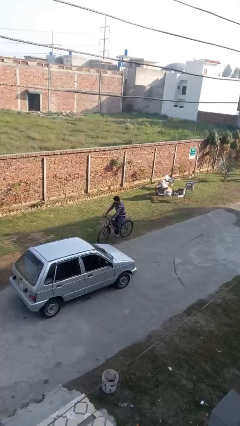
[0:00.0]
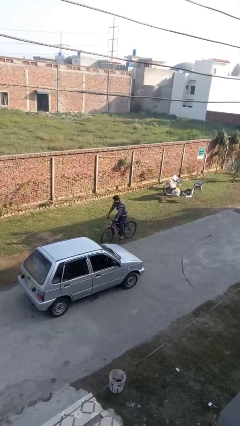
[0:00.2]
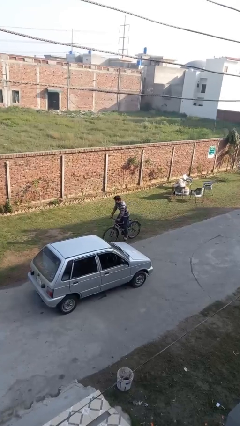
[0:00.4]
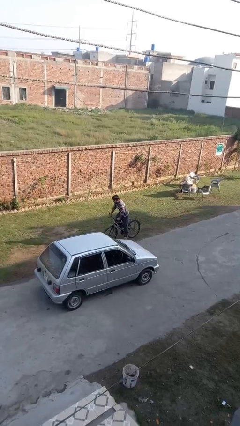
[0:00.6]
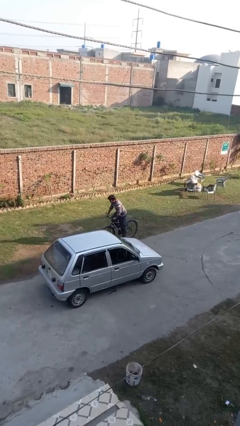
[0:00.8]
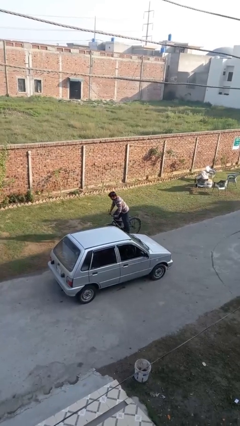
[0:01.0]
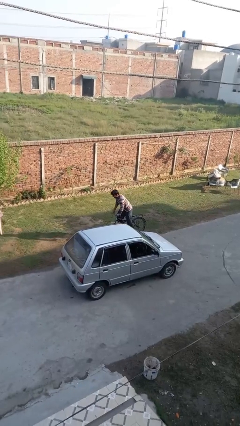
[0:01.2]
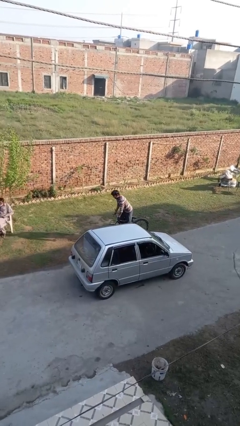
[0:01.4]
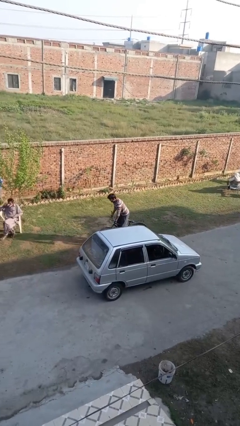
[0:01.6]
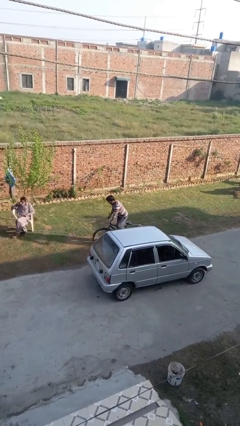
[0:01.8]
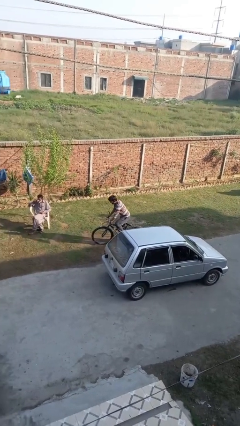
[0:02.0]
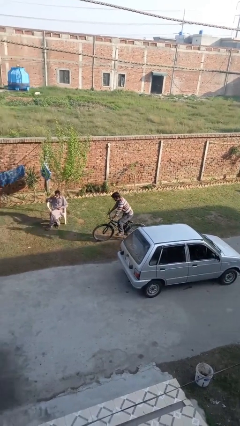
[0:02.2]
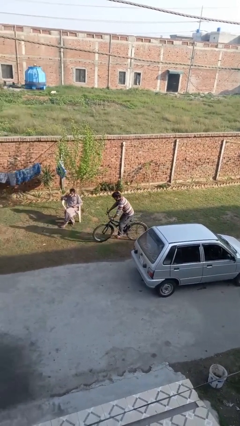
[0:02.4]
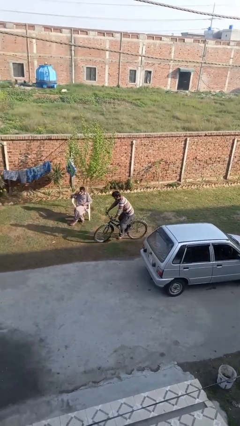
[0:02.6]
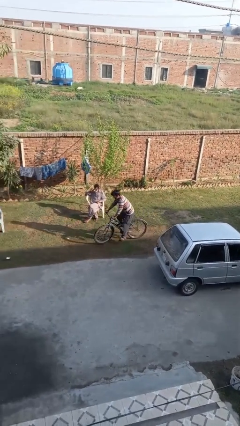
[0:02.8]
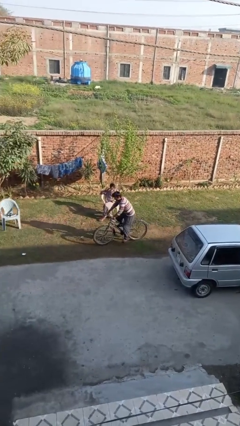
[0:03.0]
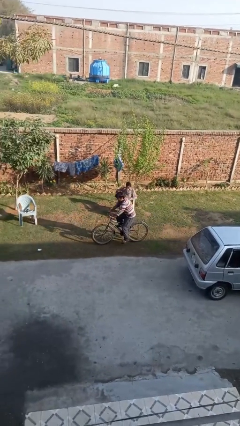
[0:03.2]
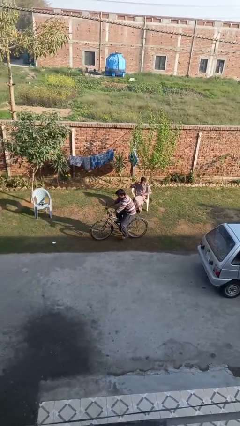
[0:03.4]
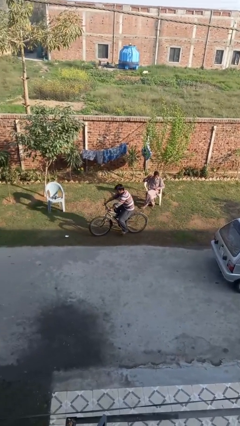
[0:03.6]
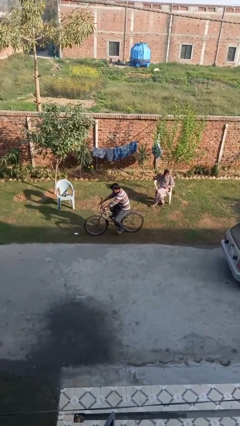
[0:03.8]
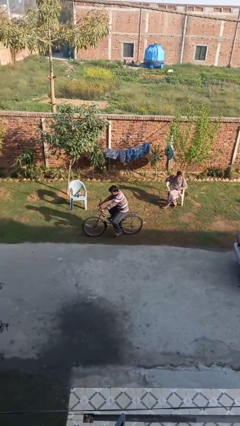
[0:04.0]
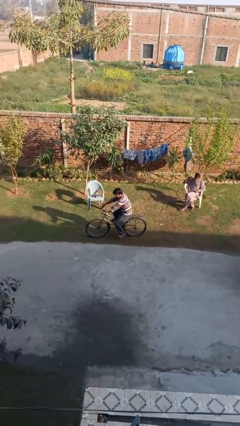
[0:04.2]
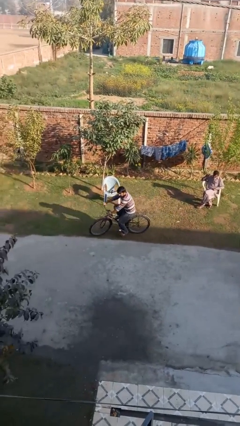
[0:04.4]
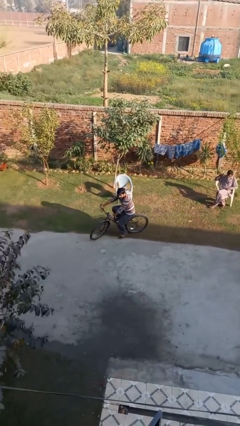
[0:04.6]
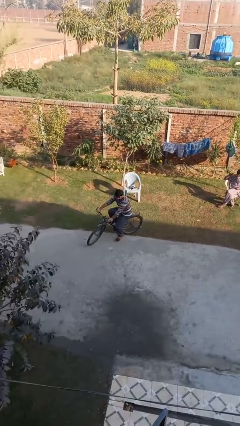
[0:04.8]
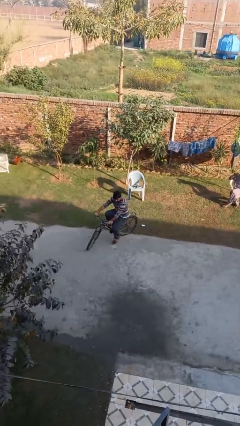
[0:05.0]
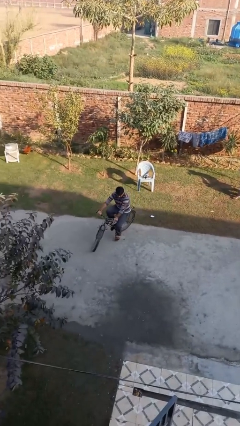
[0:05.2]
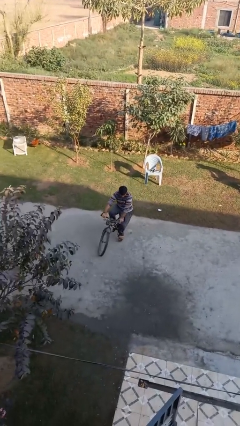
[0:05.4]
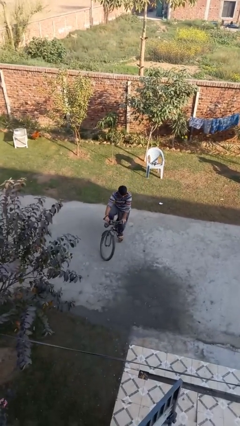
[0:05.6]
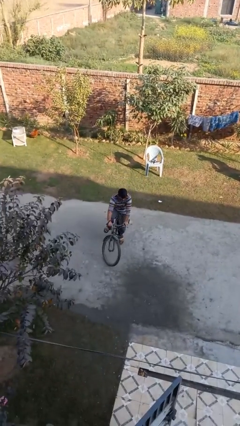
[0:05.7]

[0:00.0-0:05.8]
person rides bicycle

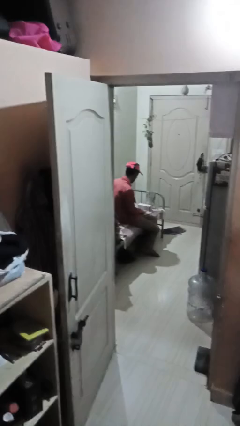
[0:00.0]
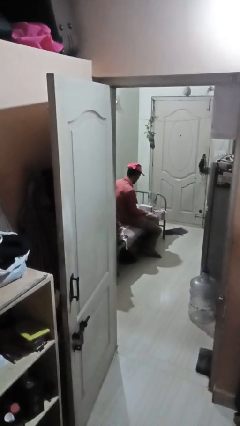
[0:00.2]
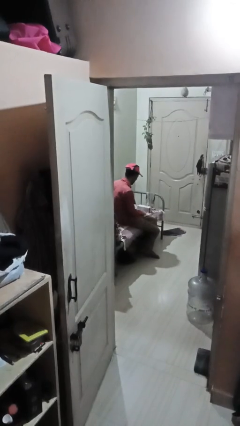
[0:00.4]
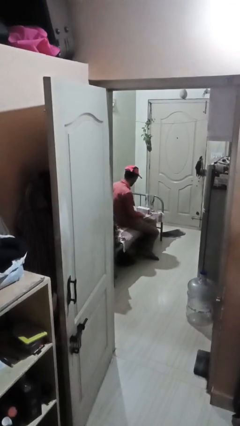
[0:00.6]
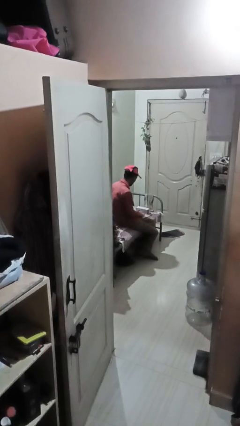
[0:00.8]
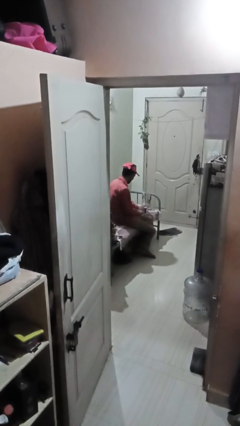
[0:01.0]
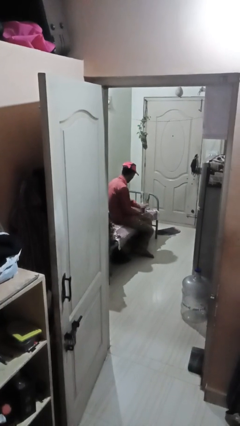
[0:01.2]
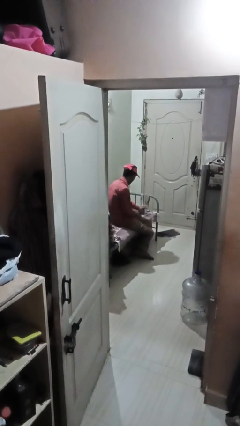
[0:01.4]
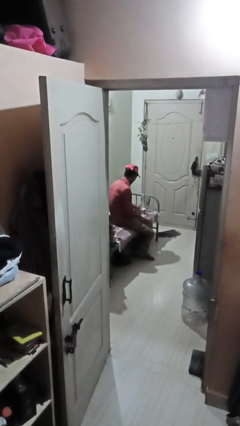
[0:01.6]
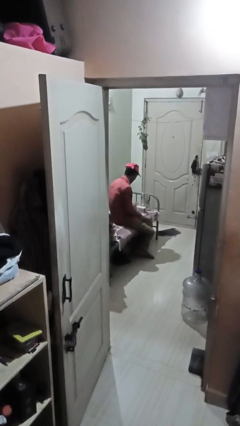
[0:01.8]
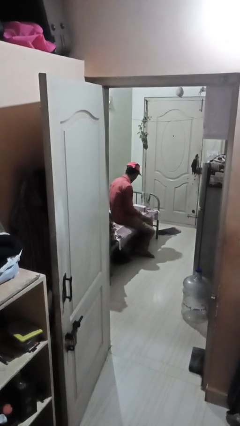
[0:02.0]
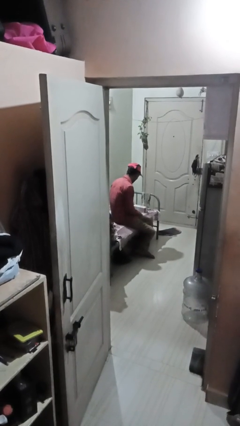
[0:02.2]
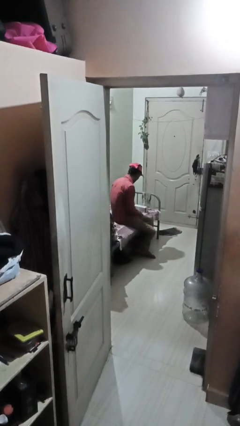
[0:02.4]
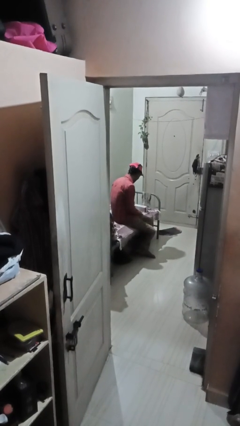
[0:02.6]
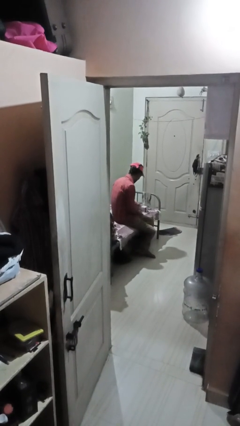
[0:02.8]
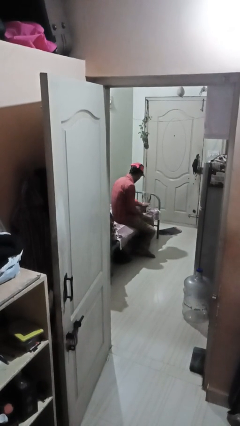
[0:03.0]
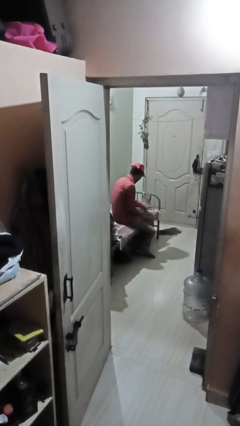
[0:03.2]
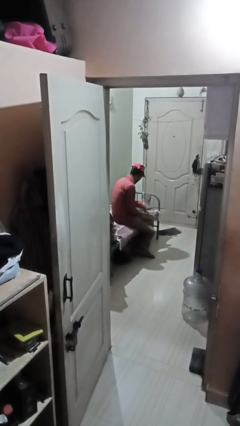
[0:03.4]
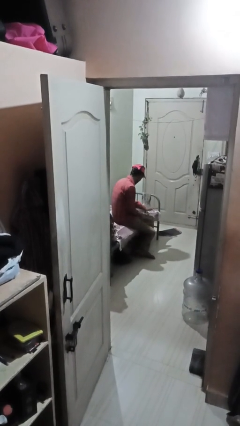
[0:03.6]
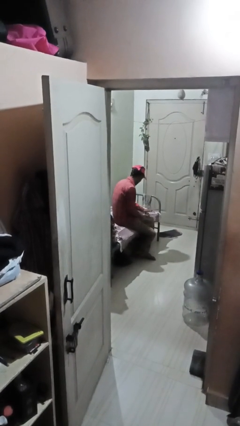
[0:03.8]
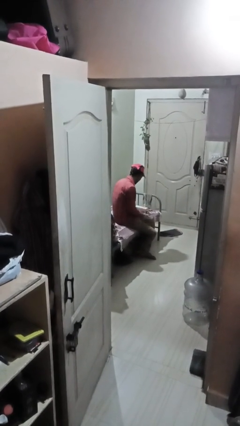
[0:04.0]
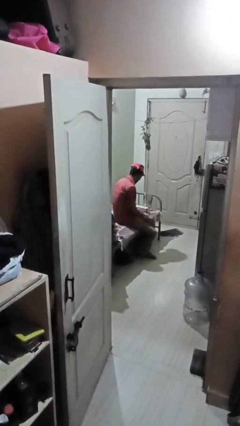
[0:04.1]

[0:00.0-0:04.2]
person waves hand over object

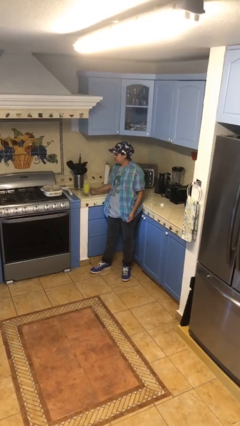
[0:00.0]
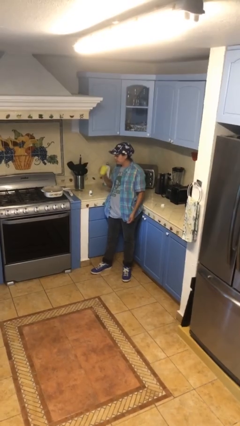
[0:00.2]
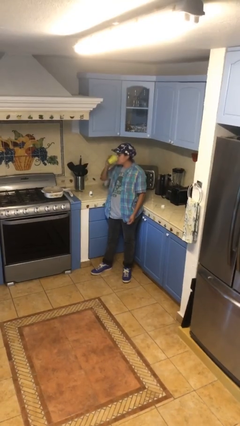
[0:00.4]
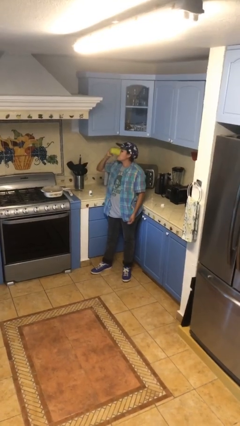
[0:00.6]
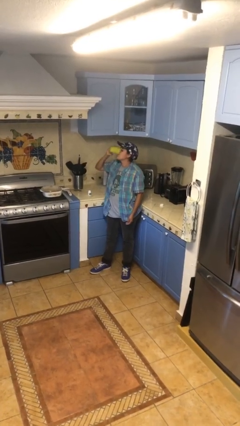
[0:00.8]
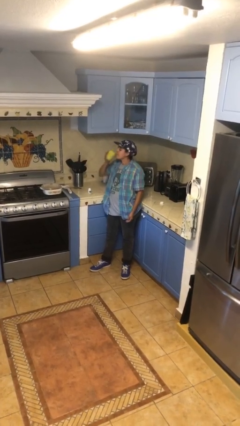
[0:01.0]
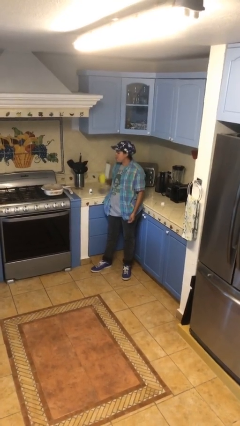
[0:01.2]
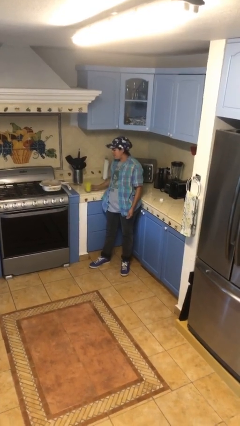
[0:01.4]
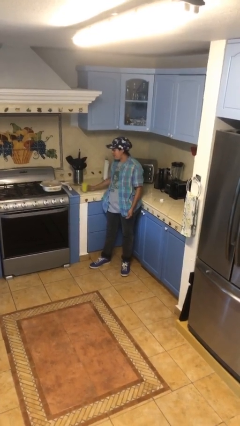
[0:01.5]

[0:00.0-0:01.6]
person drinks from cup

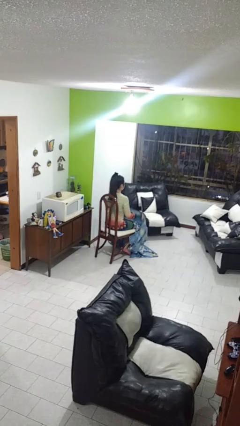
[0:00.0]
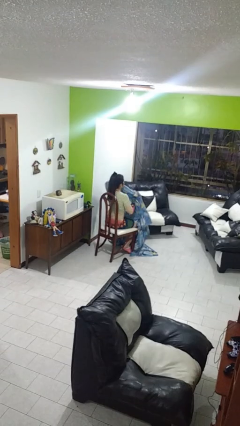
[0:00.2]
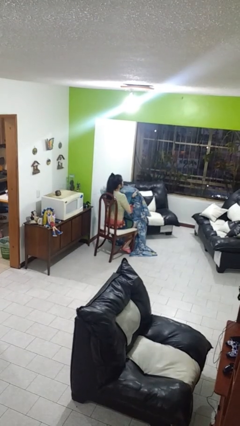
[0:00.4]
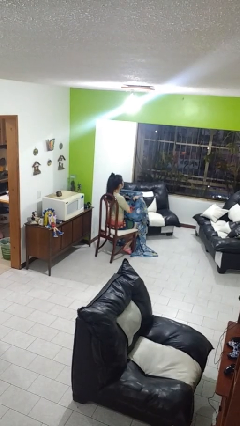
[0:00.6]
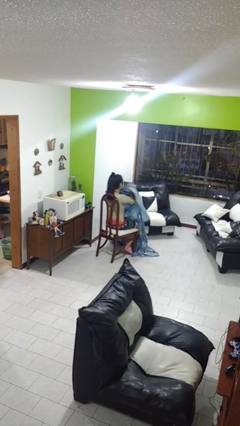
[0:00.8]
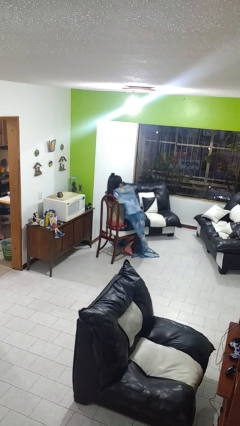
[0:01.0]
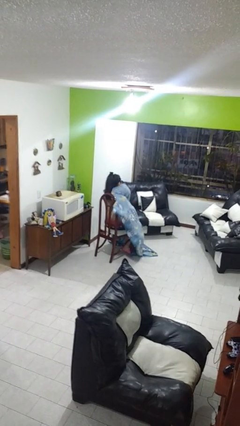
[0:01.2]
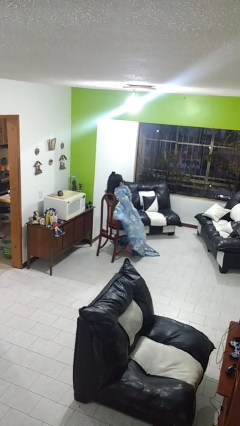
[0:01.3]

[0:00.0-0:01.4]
person covers with blanket

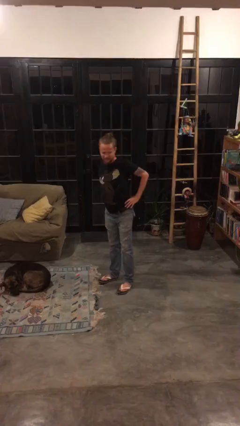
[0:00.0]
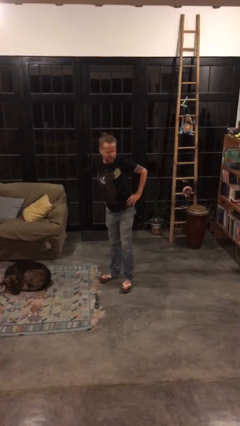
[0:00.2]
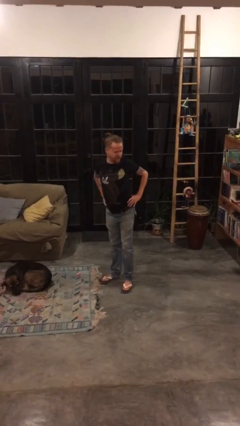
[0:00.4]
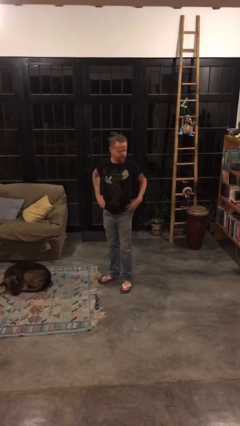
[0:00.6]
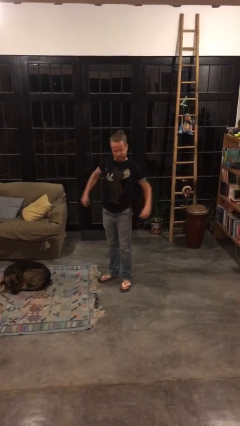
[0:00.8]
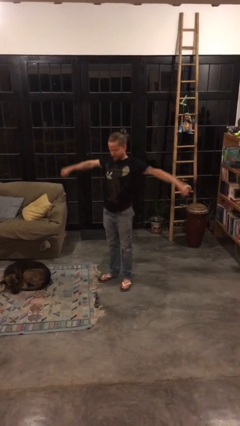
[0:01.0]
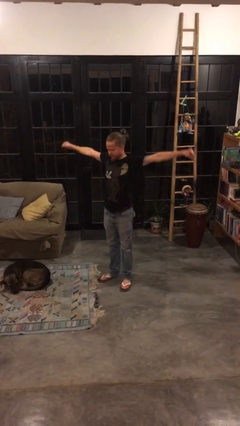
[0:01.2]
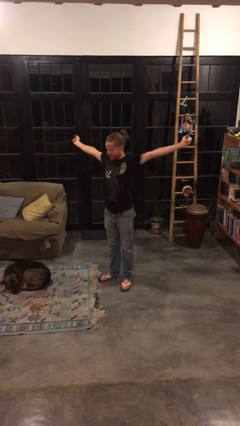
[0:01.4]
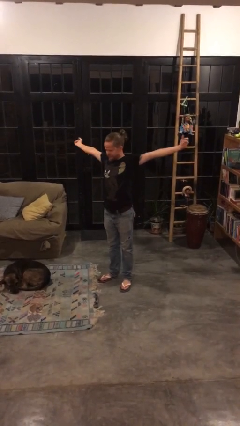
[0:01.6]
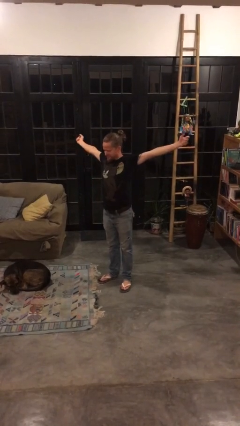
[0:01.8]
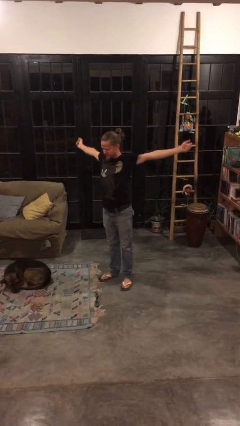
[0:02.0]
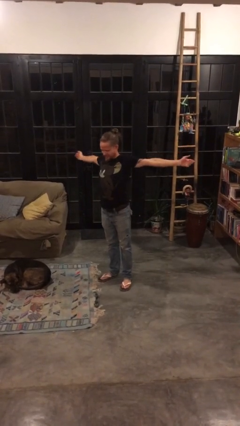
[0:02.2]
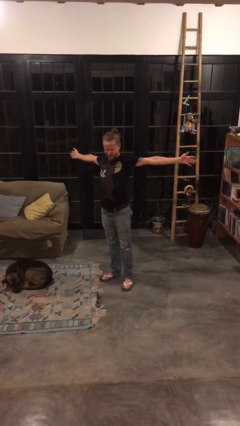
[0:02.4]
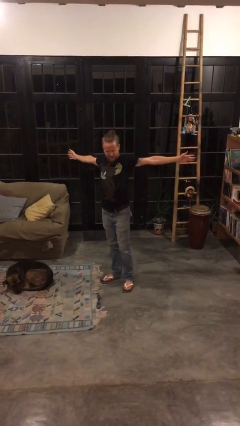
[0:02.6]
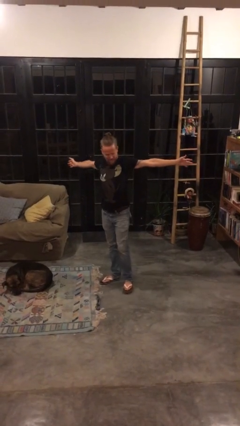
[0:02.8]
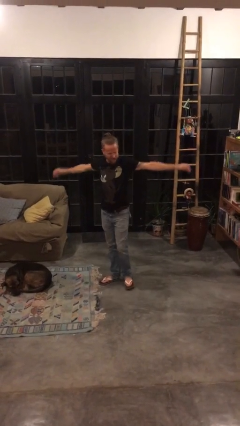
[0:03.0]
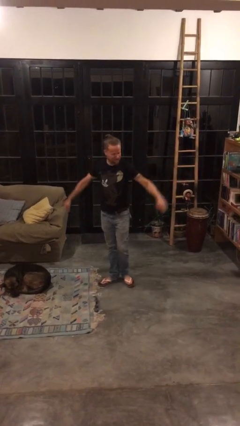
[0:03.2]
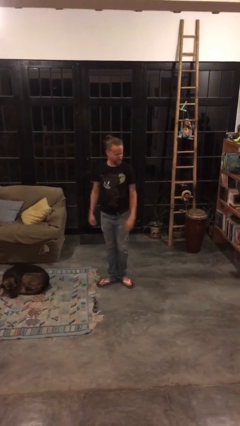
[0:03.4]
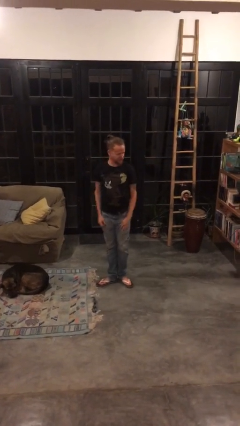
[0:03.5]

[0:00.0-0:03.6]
person stretches arms to side

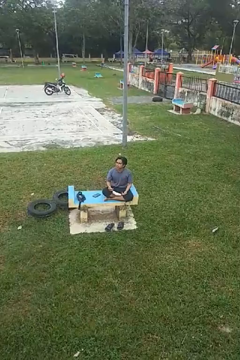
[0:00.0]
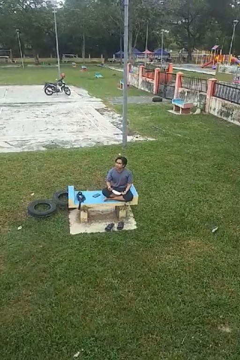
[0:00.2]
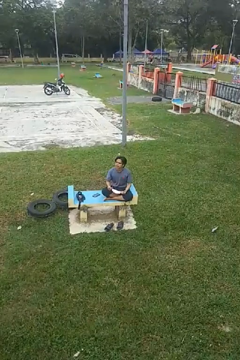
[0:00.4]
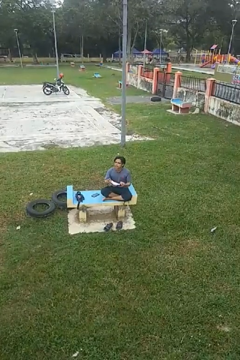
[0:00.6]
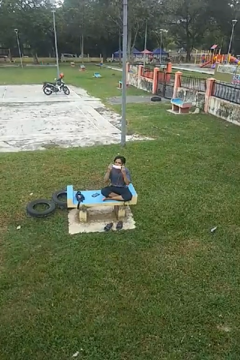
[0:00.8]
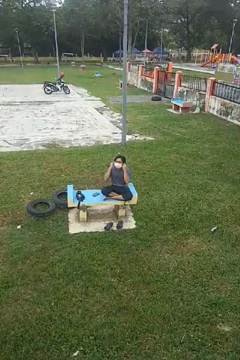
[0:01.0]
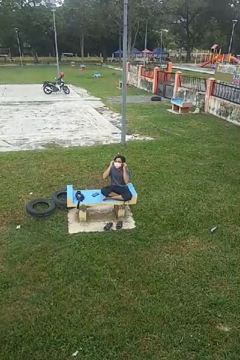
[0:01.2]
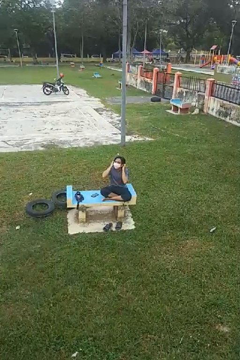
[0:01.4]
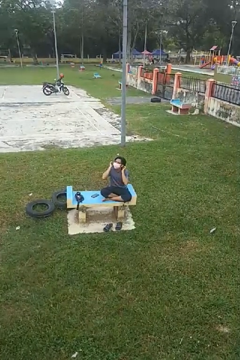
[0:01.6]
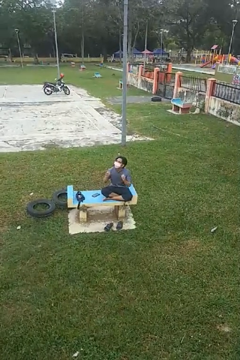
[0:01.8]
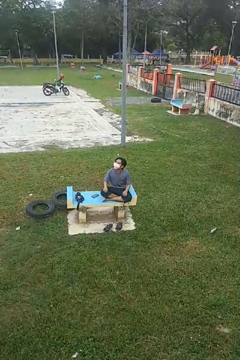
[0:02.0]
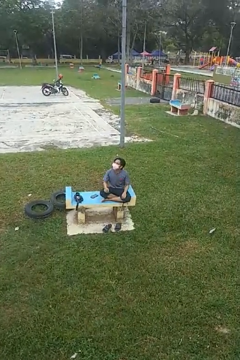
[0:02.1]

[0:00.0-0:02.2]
person puts on facemask
